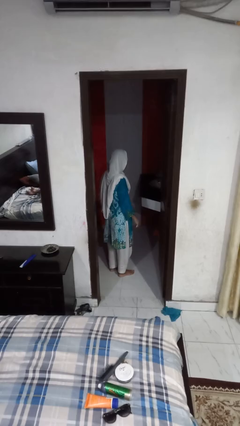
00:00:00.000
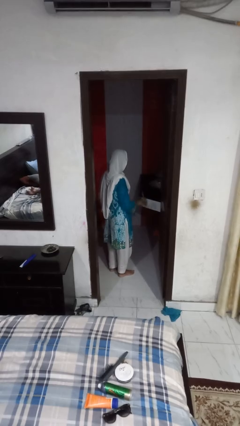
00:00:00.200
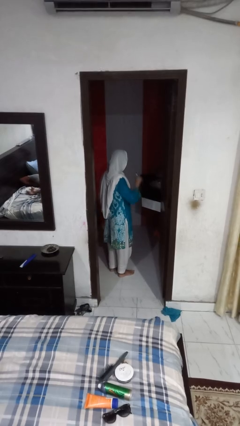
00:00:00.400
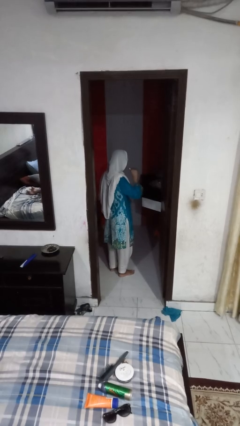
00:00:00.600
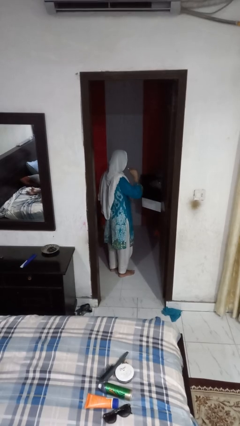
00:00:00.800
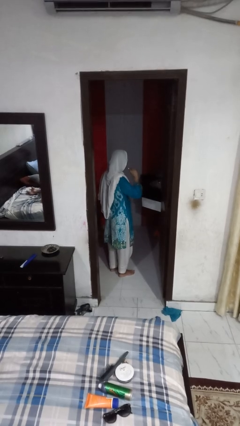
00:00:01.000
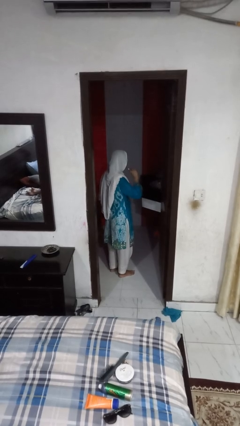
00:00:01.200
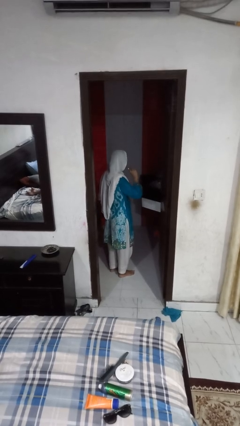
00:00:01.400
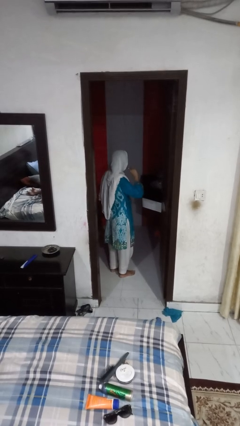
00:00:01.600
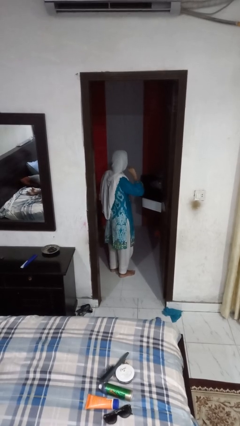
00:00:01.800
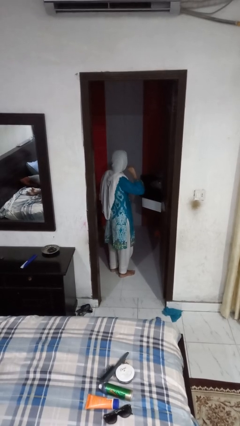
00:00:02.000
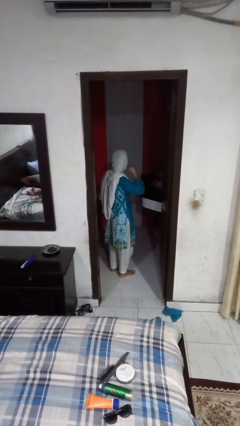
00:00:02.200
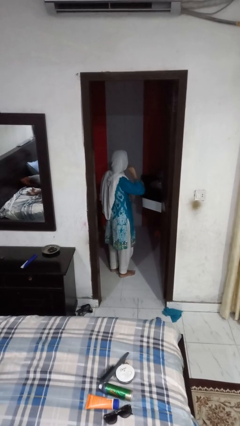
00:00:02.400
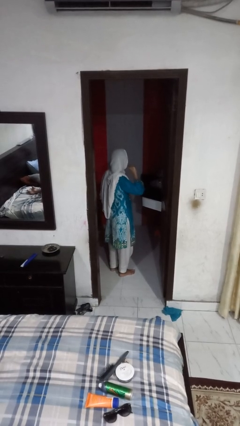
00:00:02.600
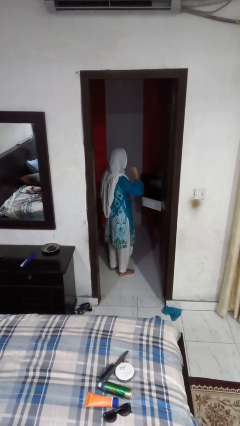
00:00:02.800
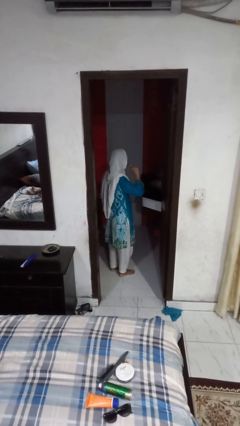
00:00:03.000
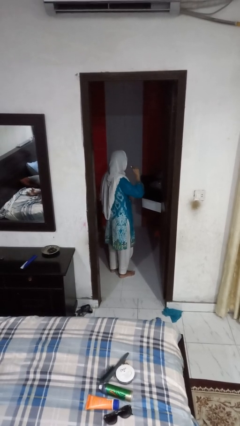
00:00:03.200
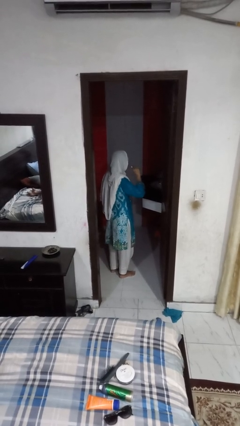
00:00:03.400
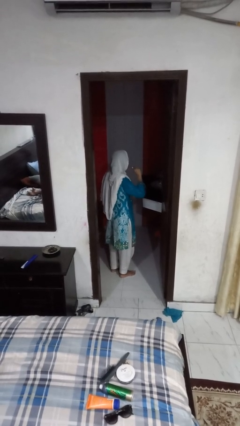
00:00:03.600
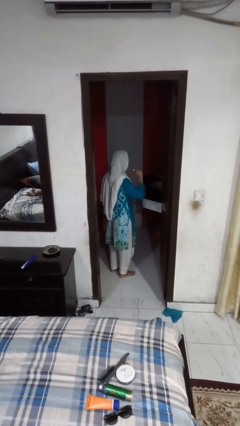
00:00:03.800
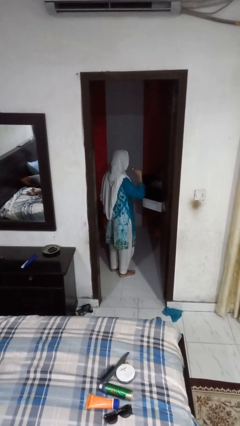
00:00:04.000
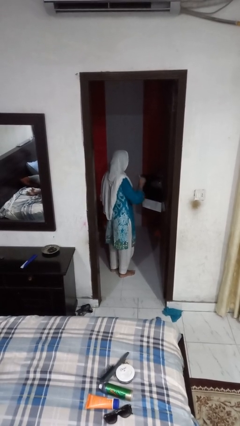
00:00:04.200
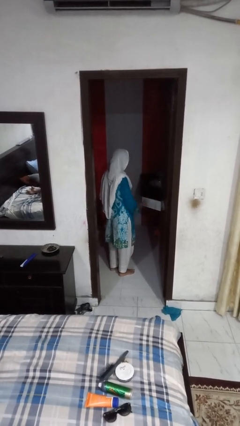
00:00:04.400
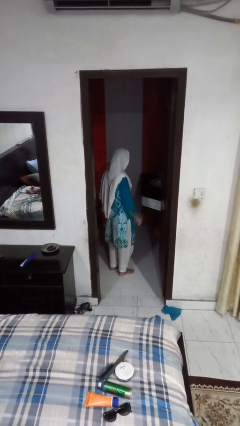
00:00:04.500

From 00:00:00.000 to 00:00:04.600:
person brushes teeth

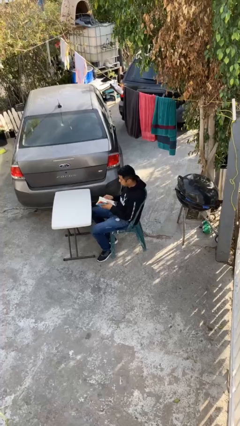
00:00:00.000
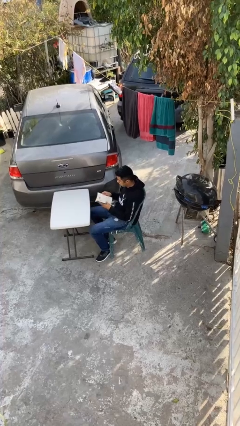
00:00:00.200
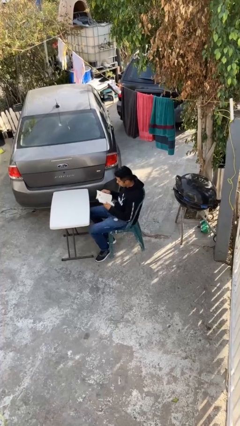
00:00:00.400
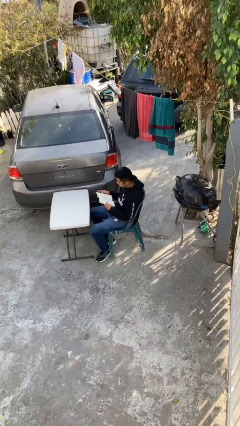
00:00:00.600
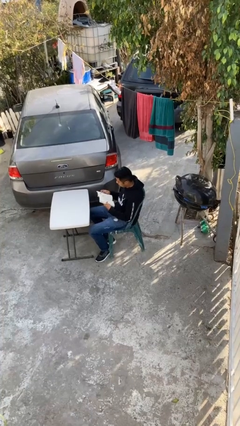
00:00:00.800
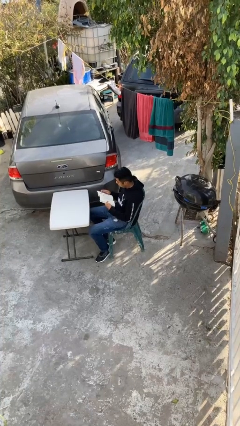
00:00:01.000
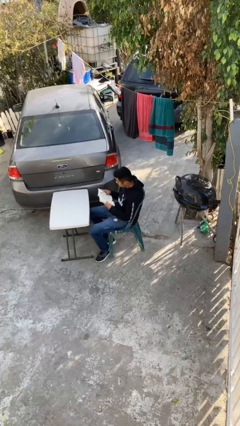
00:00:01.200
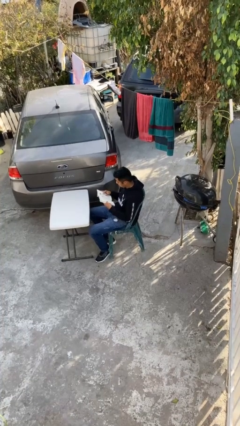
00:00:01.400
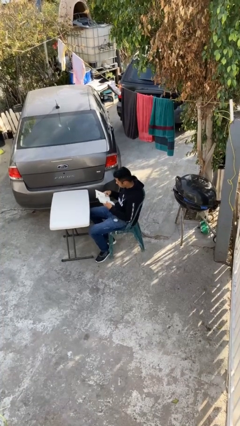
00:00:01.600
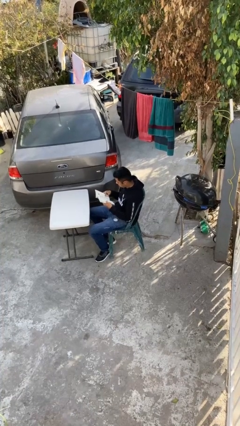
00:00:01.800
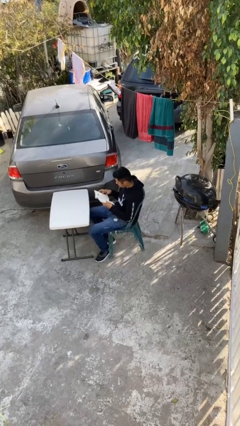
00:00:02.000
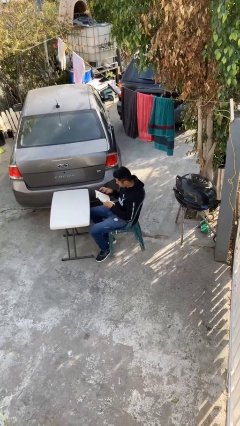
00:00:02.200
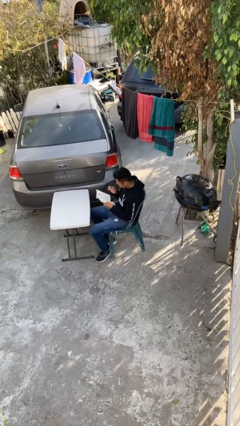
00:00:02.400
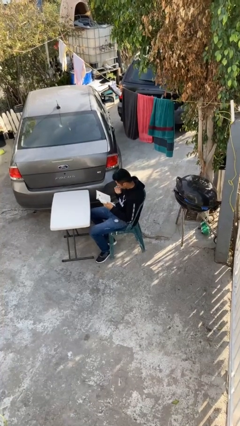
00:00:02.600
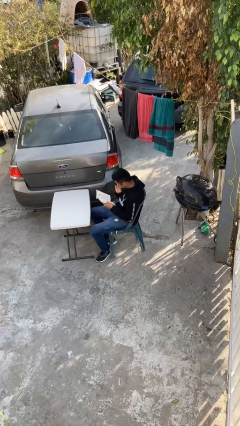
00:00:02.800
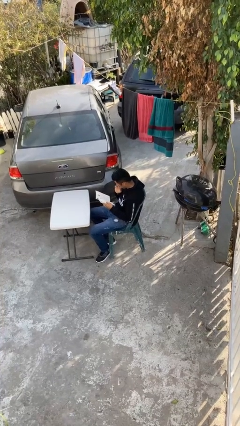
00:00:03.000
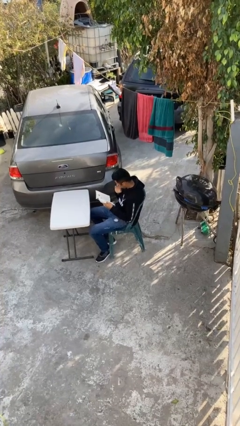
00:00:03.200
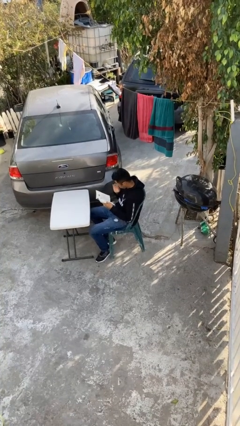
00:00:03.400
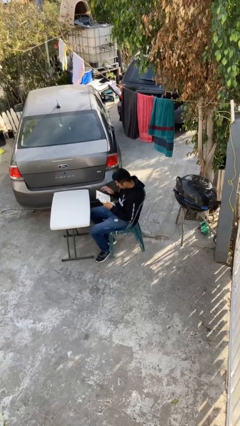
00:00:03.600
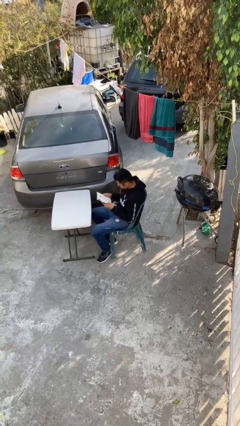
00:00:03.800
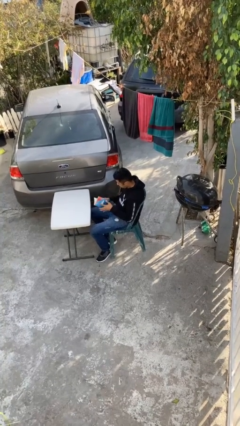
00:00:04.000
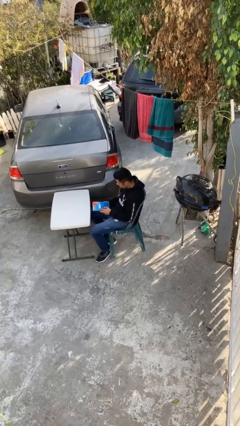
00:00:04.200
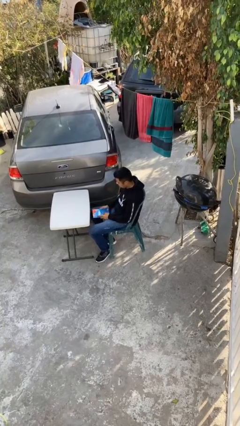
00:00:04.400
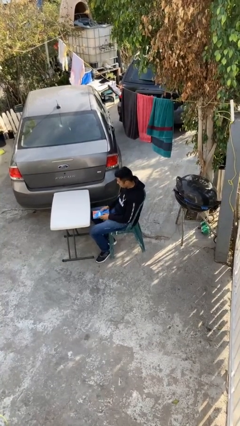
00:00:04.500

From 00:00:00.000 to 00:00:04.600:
person reads document

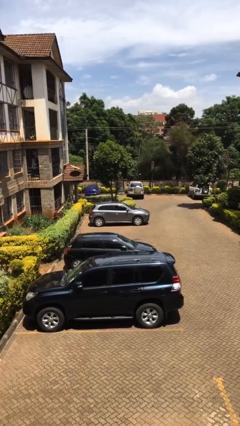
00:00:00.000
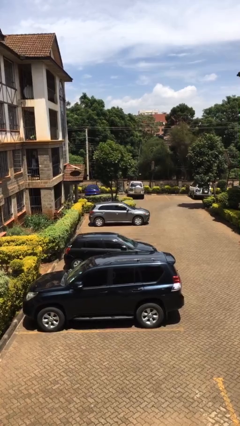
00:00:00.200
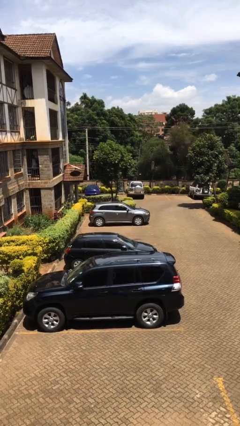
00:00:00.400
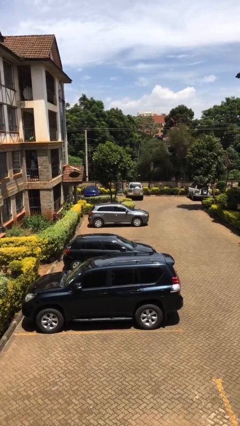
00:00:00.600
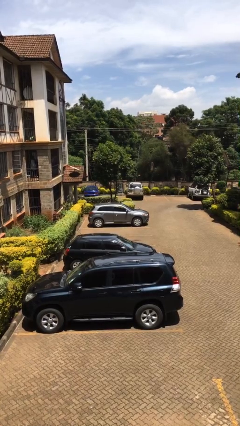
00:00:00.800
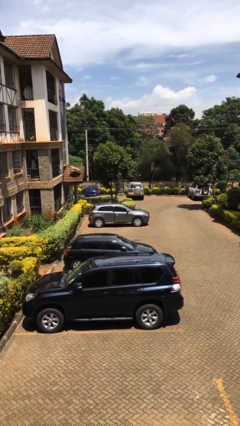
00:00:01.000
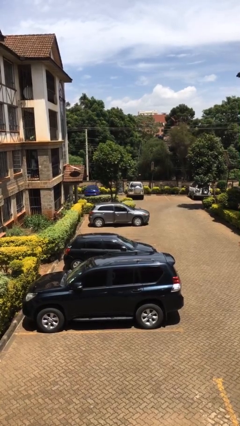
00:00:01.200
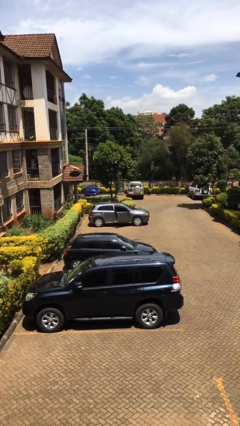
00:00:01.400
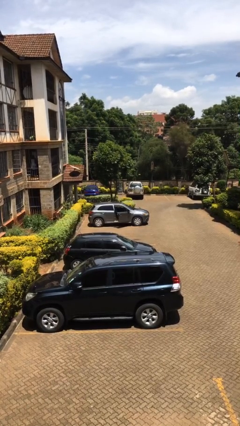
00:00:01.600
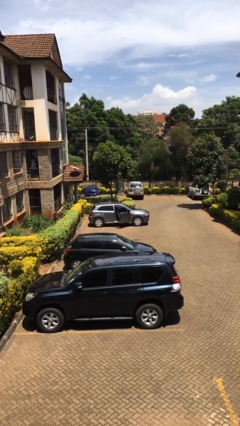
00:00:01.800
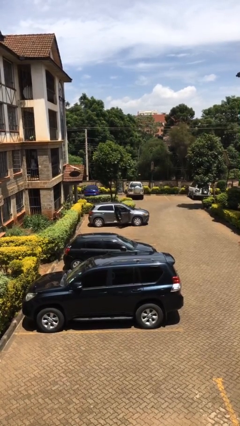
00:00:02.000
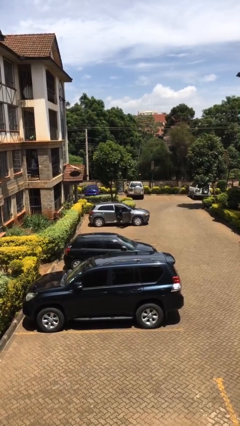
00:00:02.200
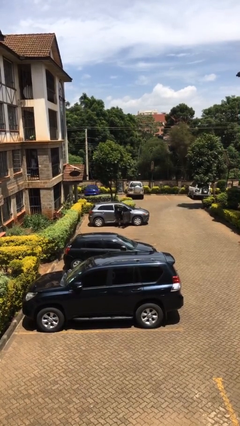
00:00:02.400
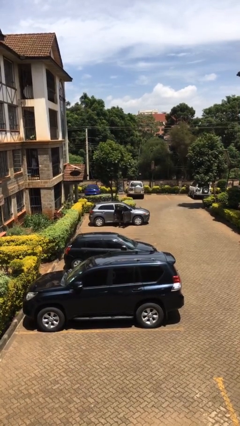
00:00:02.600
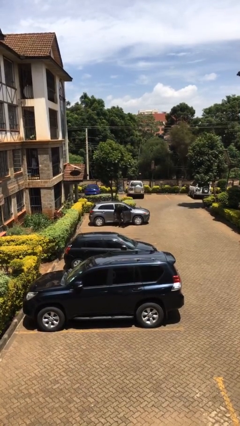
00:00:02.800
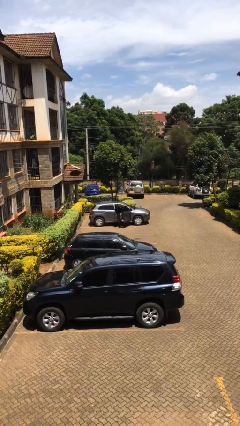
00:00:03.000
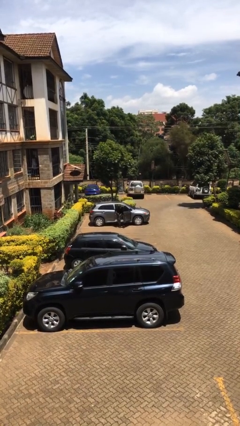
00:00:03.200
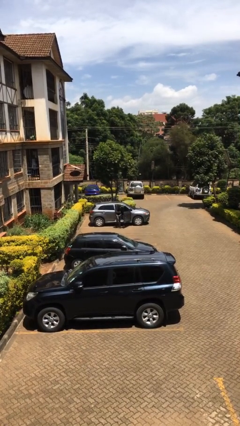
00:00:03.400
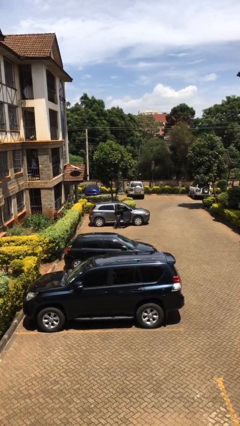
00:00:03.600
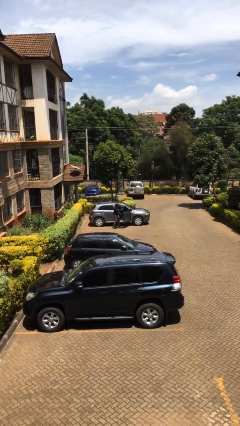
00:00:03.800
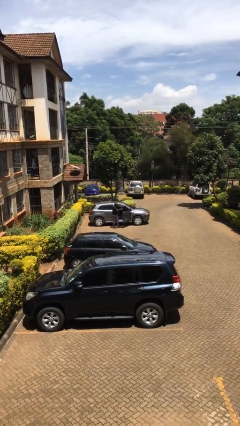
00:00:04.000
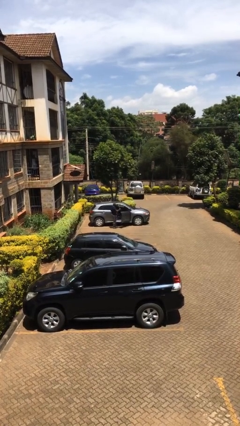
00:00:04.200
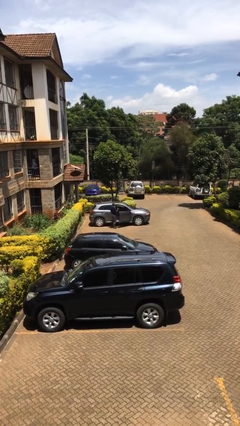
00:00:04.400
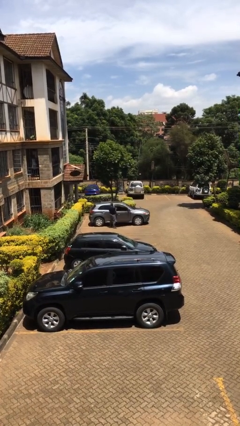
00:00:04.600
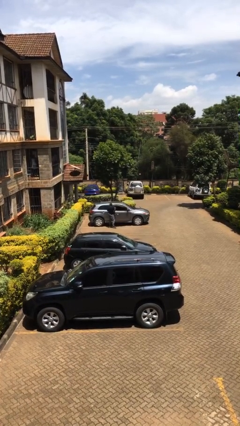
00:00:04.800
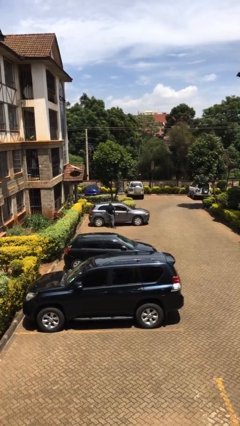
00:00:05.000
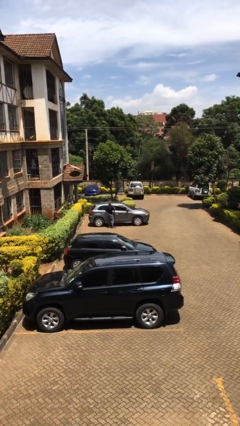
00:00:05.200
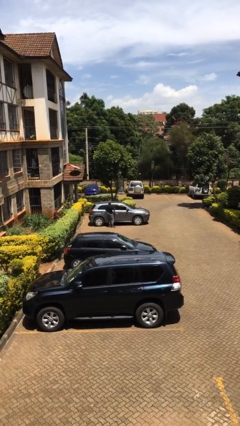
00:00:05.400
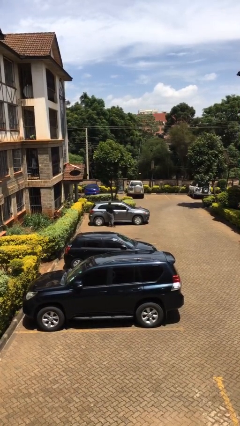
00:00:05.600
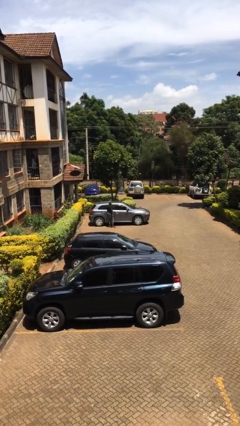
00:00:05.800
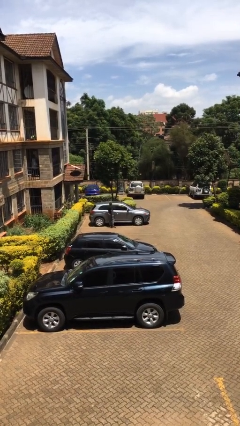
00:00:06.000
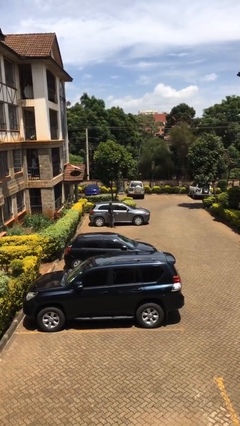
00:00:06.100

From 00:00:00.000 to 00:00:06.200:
car drops off person

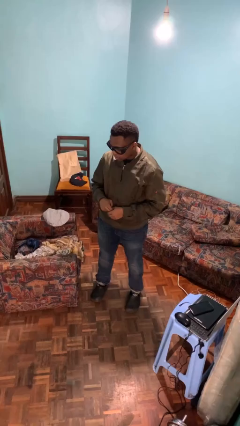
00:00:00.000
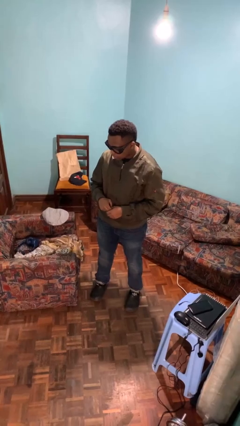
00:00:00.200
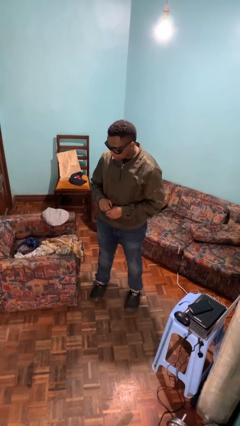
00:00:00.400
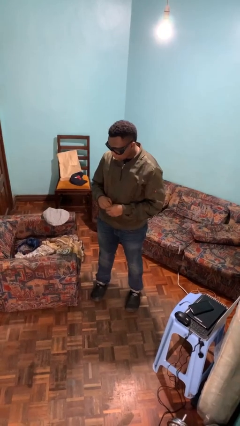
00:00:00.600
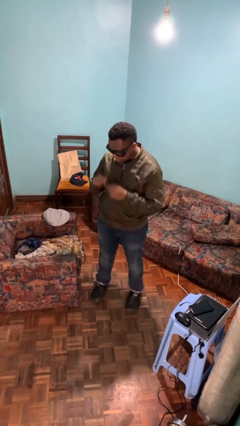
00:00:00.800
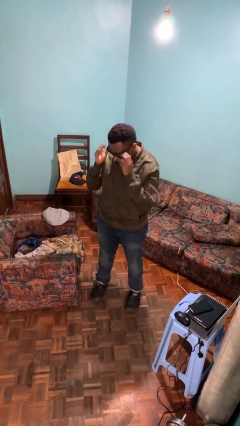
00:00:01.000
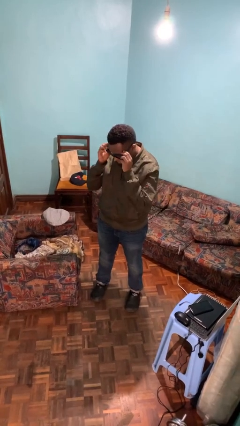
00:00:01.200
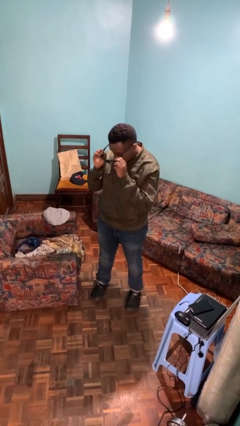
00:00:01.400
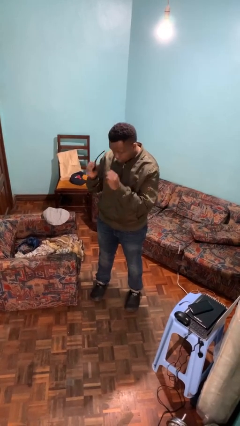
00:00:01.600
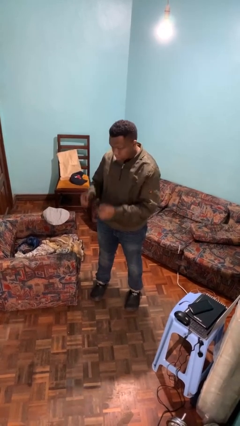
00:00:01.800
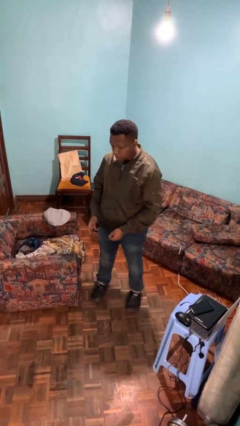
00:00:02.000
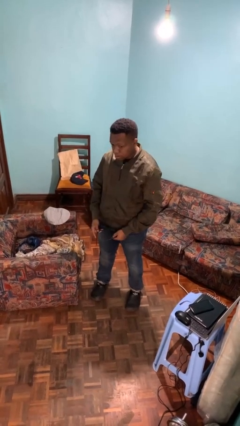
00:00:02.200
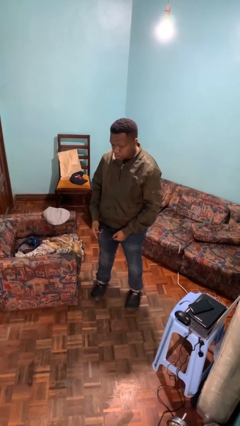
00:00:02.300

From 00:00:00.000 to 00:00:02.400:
person takes off glasses
